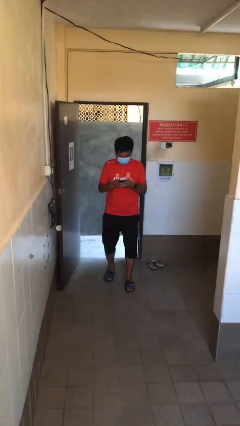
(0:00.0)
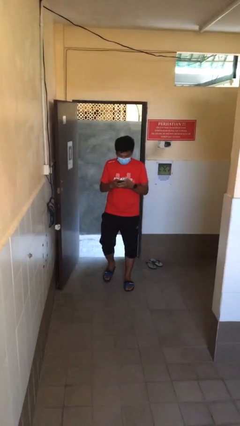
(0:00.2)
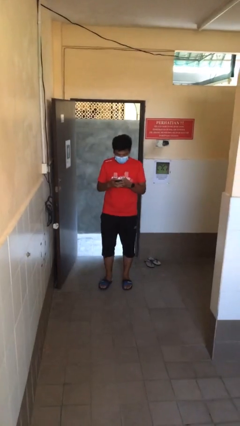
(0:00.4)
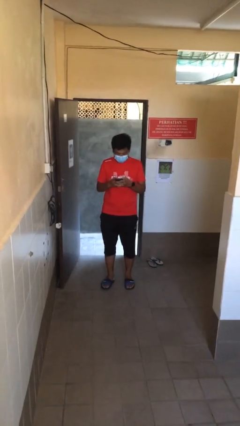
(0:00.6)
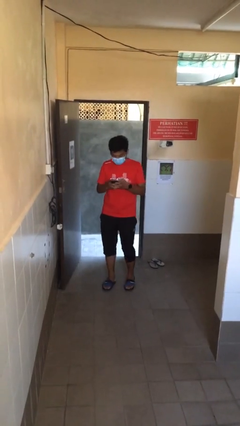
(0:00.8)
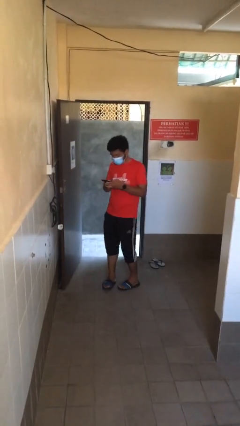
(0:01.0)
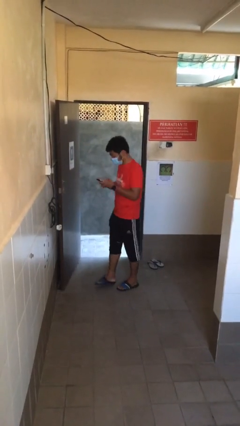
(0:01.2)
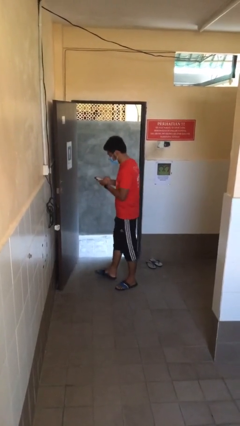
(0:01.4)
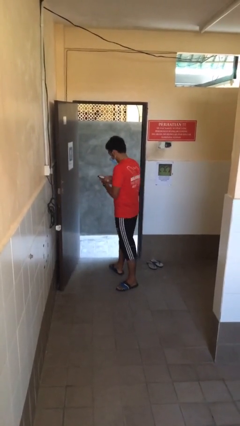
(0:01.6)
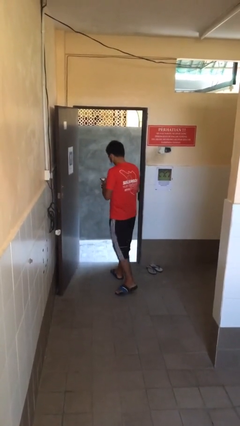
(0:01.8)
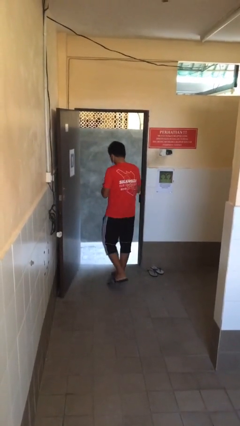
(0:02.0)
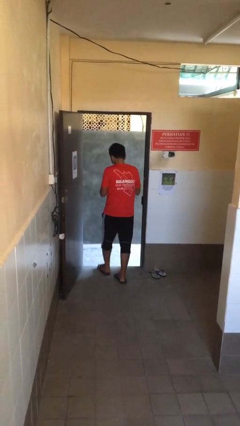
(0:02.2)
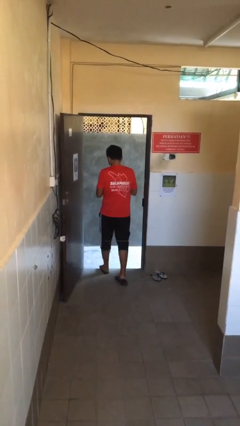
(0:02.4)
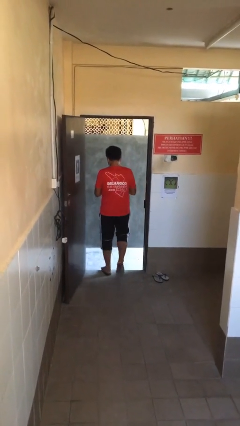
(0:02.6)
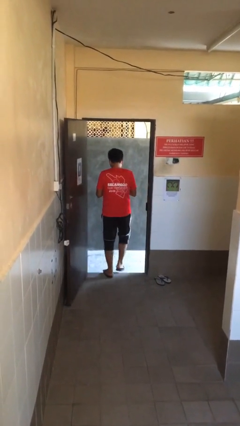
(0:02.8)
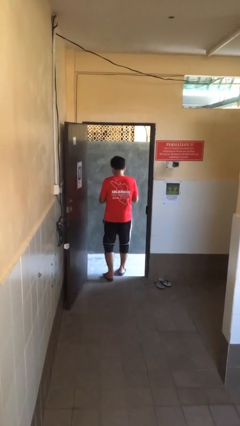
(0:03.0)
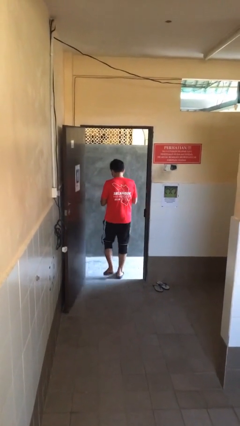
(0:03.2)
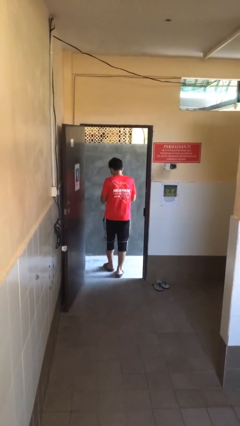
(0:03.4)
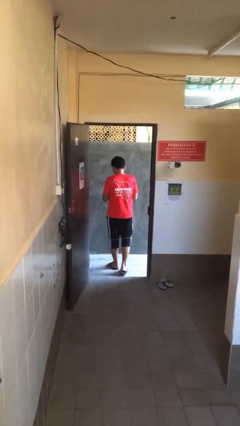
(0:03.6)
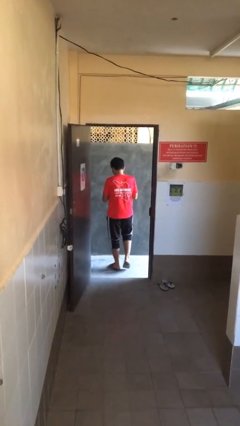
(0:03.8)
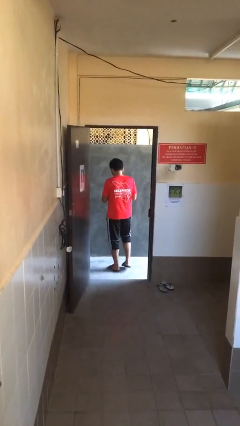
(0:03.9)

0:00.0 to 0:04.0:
person exits scene through structure

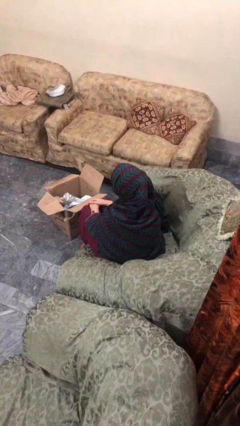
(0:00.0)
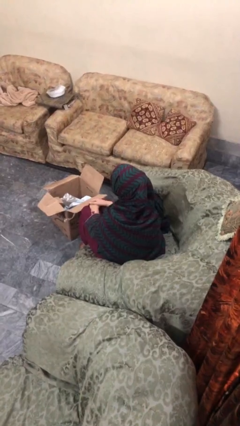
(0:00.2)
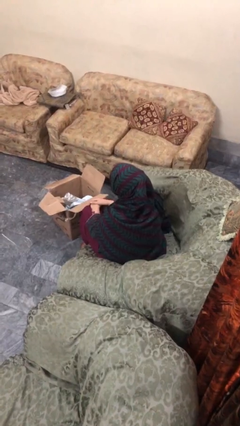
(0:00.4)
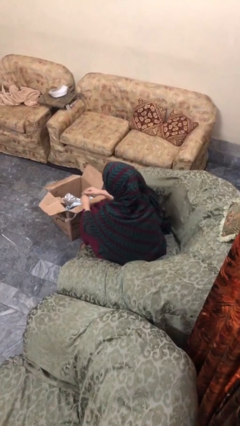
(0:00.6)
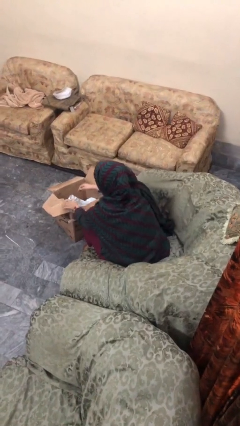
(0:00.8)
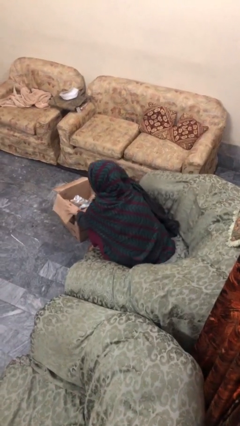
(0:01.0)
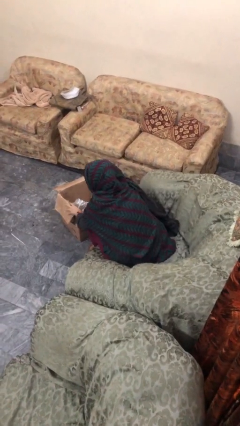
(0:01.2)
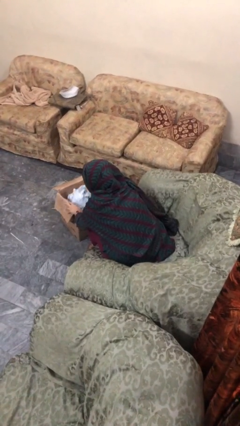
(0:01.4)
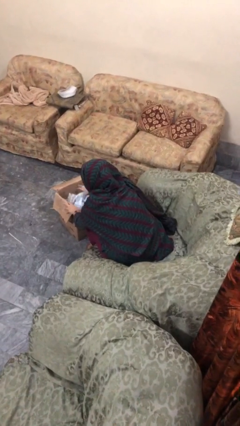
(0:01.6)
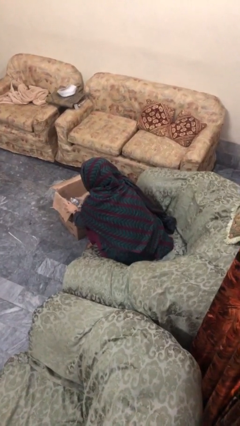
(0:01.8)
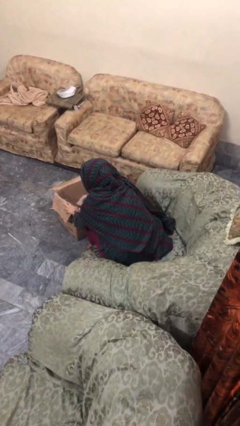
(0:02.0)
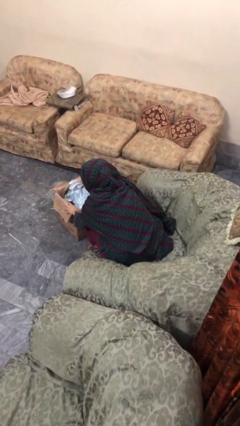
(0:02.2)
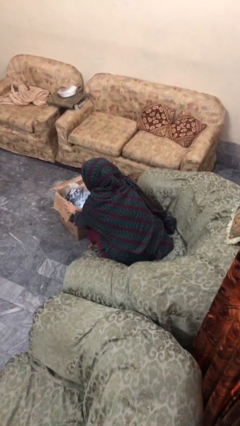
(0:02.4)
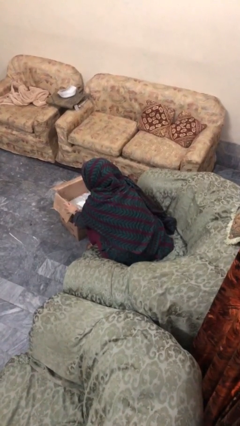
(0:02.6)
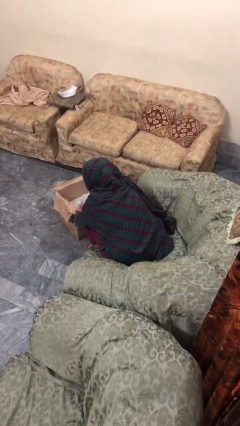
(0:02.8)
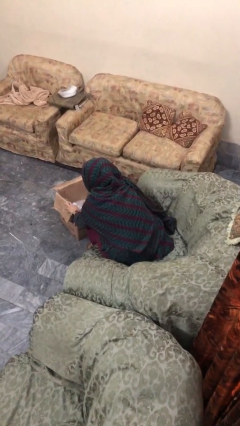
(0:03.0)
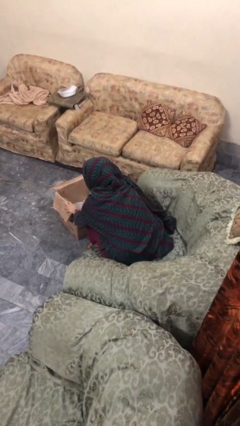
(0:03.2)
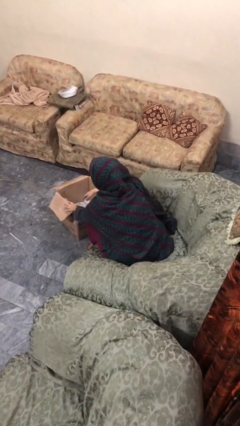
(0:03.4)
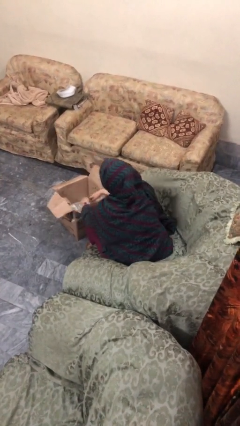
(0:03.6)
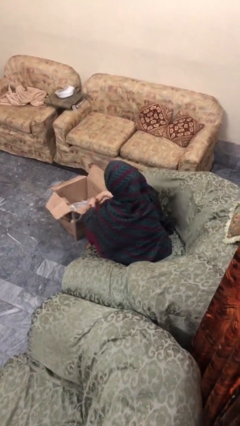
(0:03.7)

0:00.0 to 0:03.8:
person searches in box

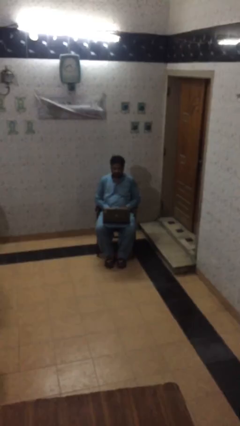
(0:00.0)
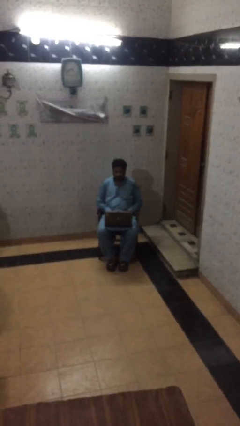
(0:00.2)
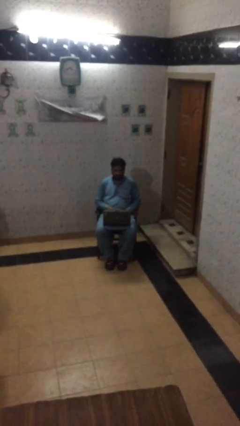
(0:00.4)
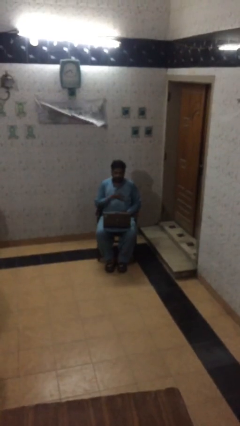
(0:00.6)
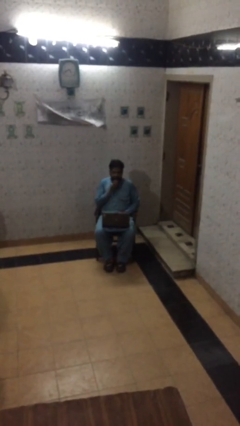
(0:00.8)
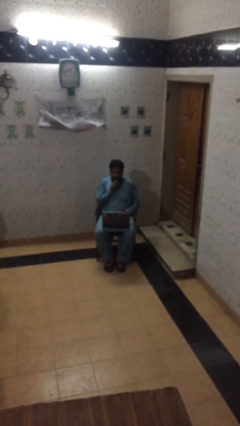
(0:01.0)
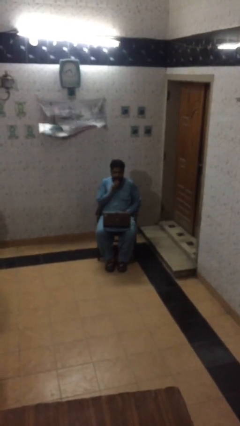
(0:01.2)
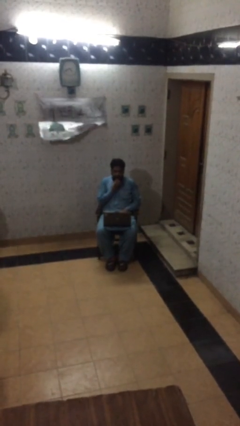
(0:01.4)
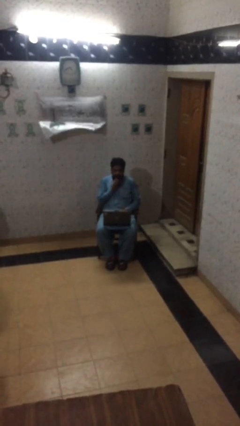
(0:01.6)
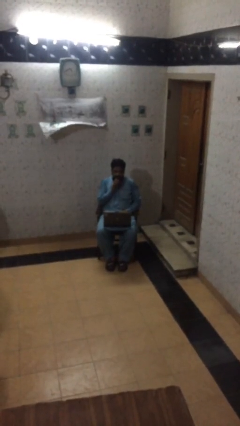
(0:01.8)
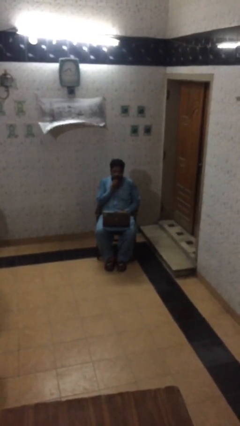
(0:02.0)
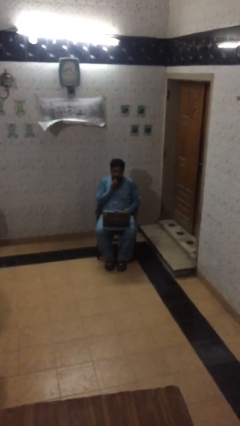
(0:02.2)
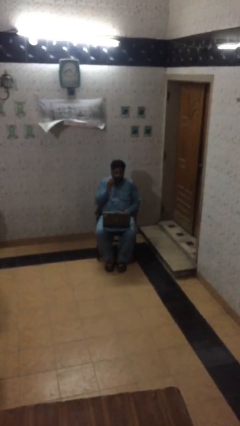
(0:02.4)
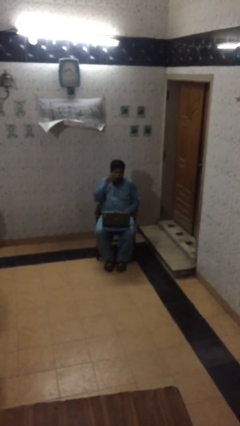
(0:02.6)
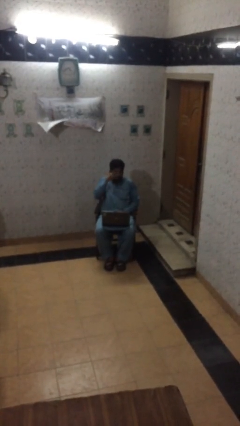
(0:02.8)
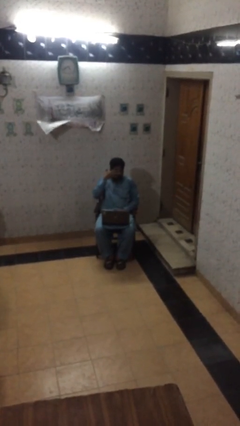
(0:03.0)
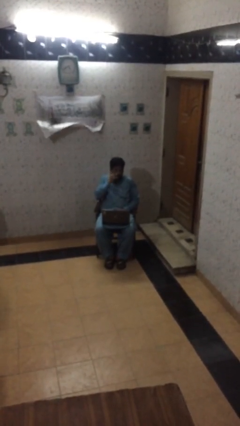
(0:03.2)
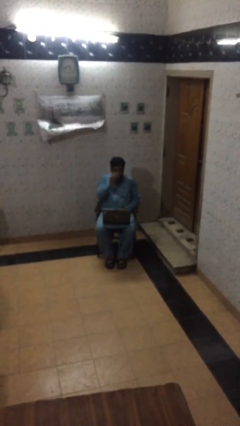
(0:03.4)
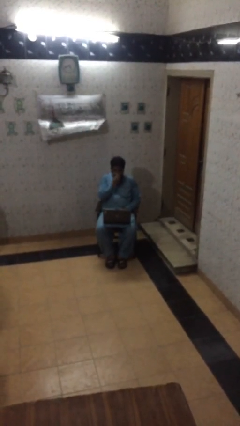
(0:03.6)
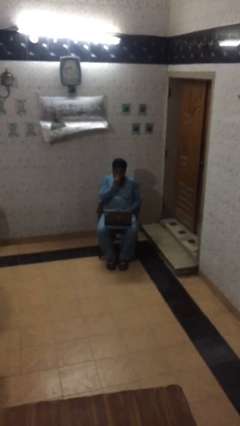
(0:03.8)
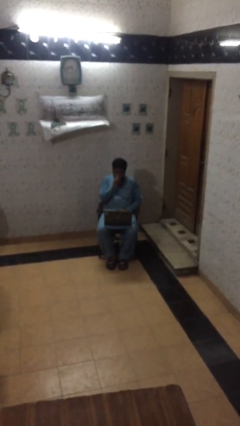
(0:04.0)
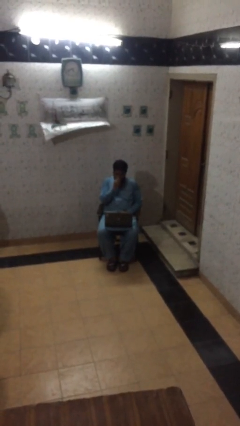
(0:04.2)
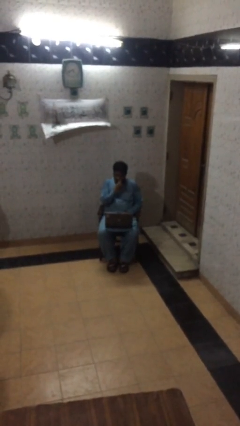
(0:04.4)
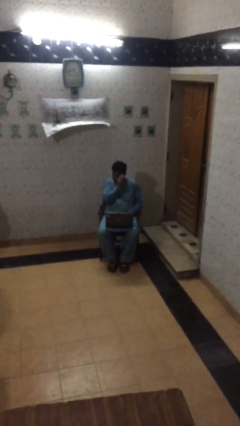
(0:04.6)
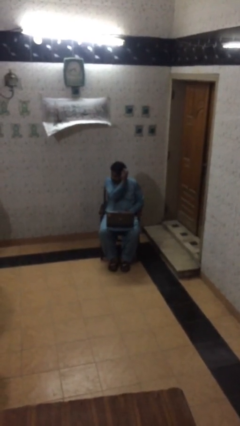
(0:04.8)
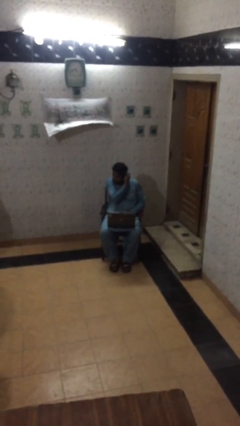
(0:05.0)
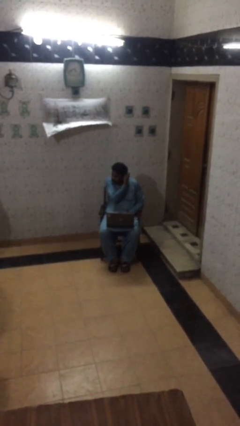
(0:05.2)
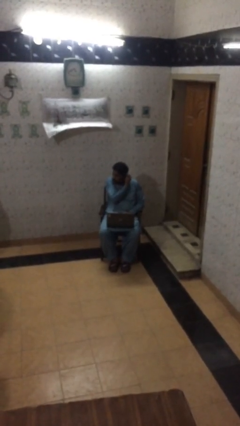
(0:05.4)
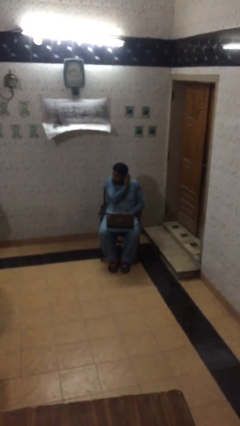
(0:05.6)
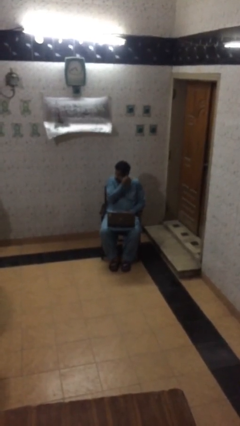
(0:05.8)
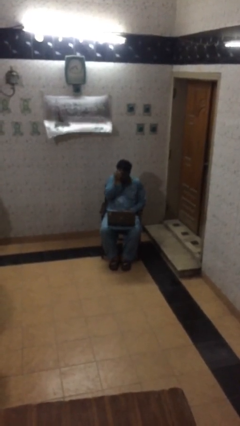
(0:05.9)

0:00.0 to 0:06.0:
person interacts with laptop

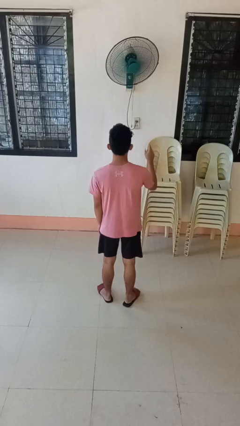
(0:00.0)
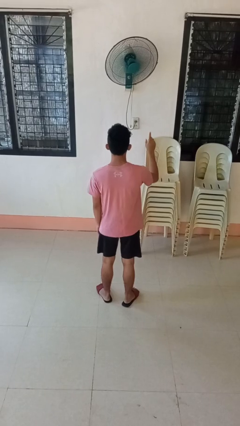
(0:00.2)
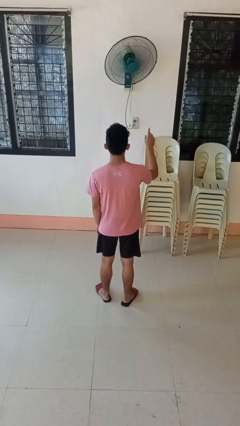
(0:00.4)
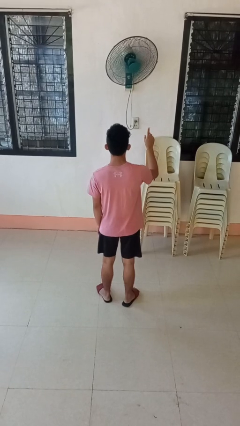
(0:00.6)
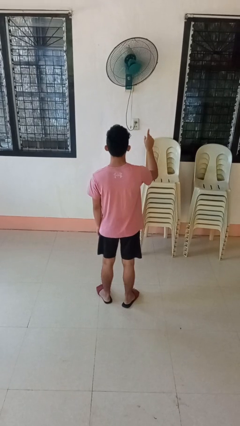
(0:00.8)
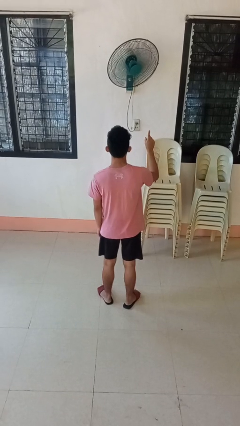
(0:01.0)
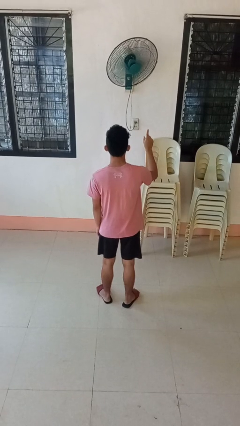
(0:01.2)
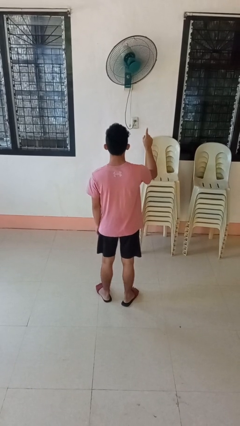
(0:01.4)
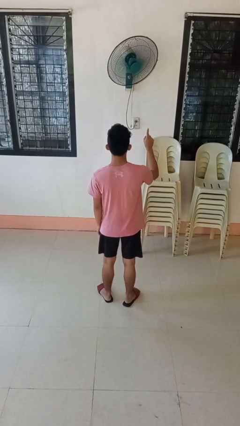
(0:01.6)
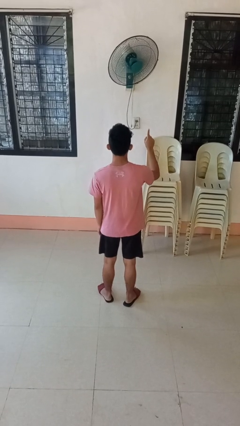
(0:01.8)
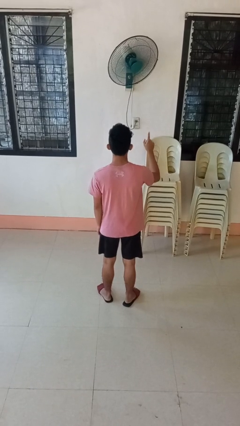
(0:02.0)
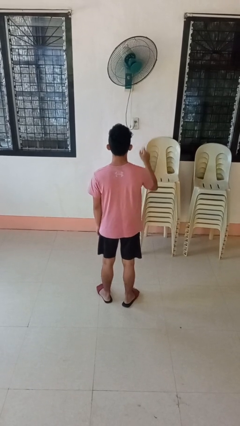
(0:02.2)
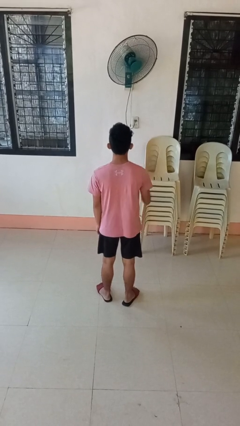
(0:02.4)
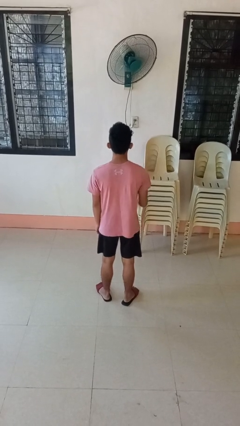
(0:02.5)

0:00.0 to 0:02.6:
person gestures number one

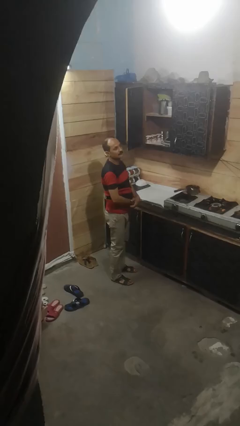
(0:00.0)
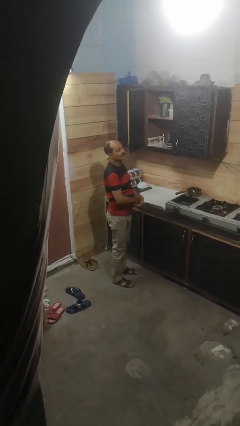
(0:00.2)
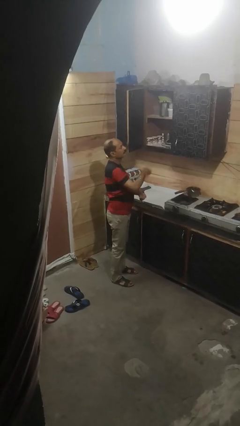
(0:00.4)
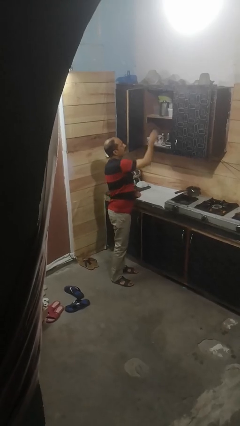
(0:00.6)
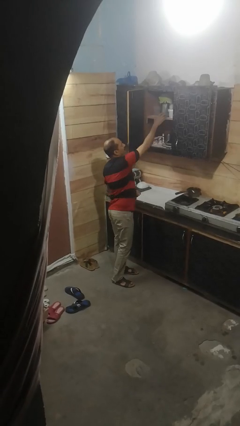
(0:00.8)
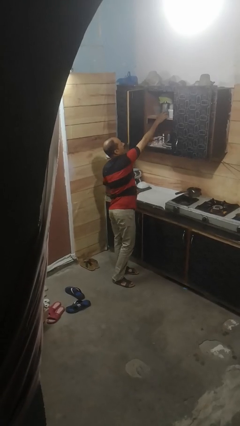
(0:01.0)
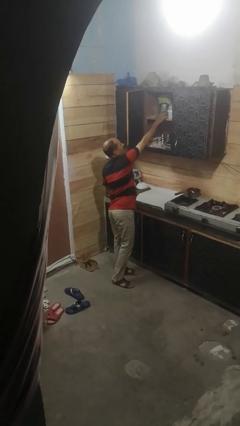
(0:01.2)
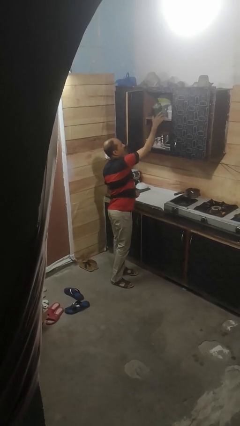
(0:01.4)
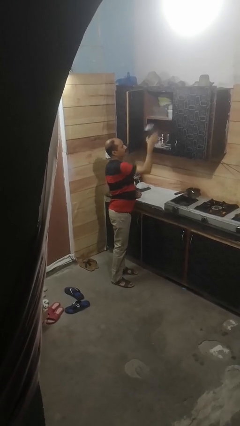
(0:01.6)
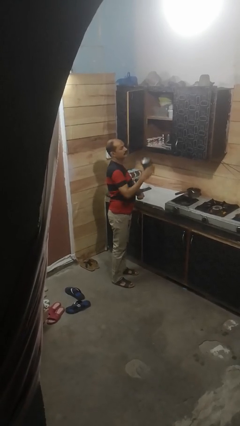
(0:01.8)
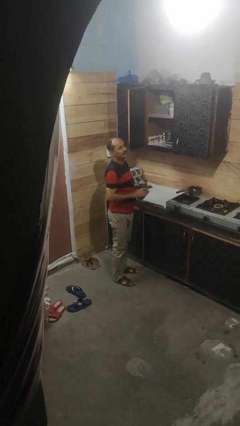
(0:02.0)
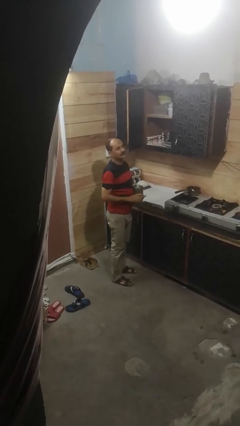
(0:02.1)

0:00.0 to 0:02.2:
person picks up object from cabinet
